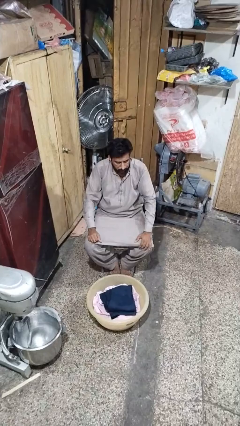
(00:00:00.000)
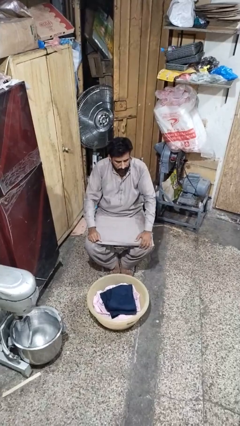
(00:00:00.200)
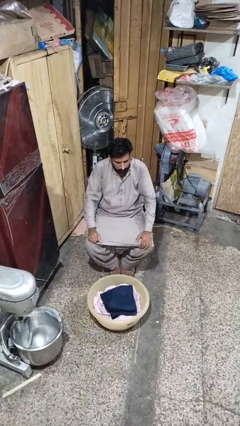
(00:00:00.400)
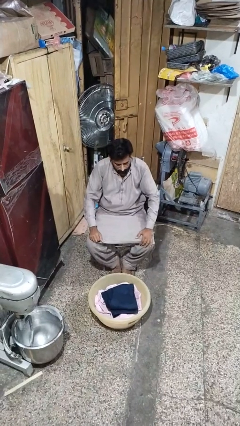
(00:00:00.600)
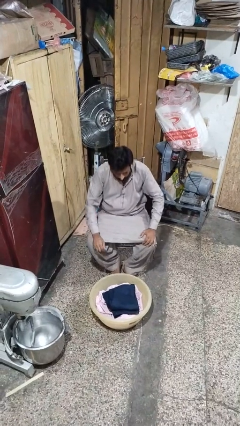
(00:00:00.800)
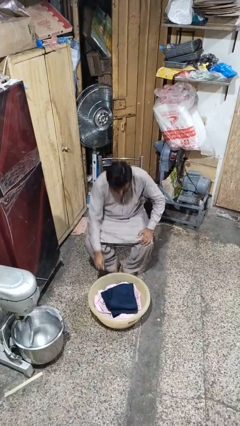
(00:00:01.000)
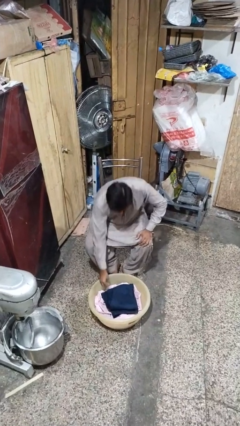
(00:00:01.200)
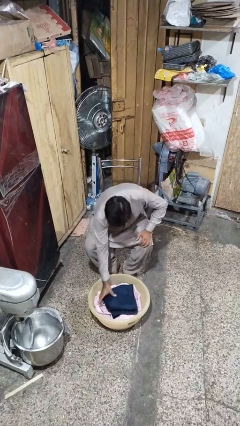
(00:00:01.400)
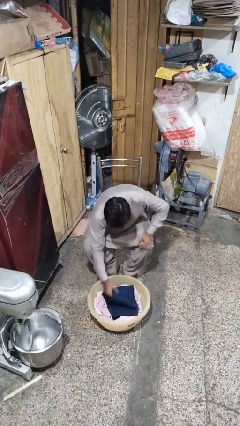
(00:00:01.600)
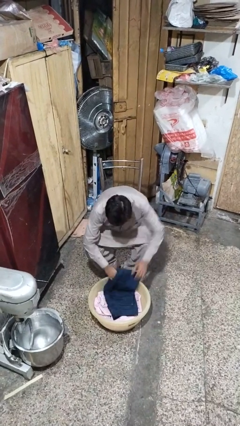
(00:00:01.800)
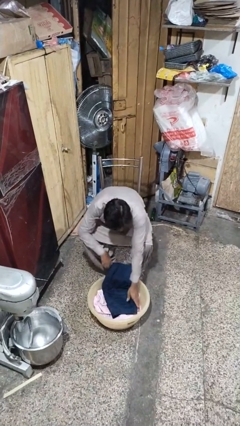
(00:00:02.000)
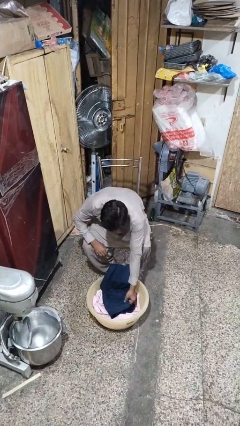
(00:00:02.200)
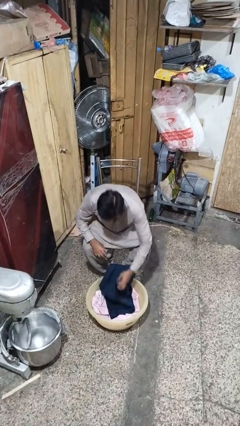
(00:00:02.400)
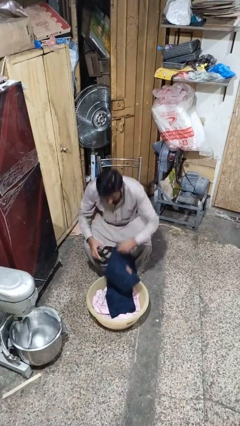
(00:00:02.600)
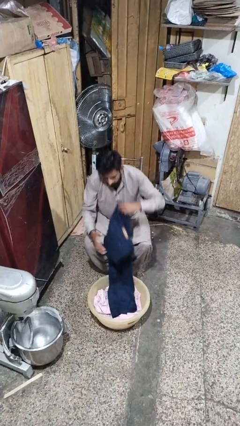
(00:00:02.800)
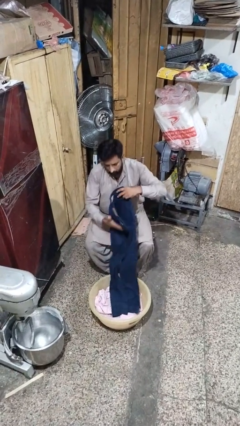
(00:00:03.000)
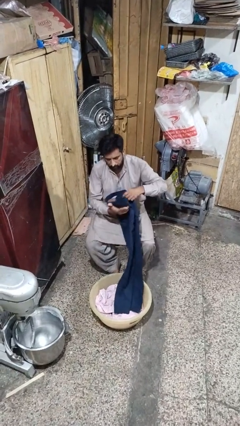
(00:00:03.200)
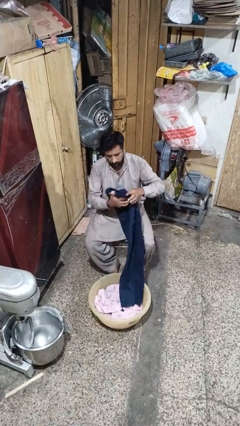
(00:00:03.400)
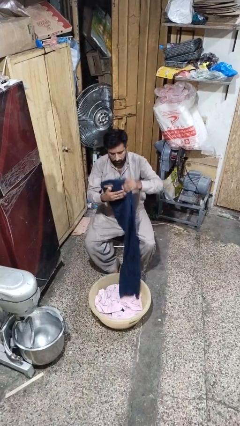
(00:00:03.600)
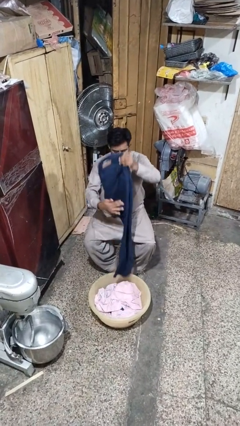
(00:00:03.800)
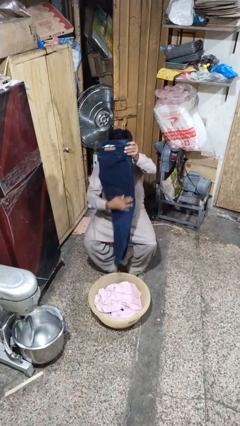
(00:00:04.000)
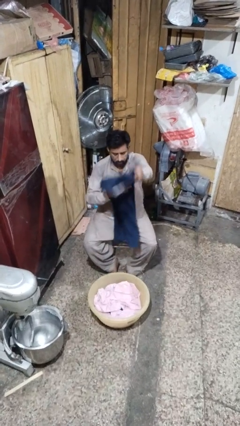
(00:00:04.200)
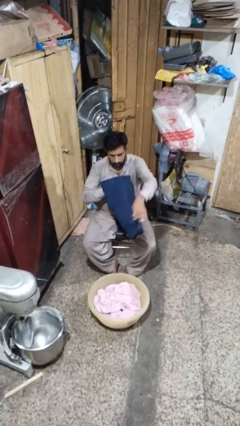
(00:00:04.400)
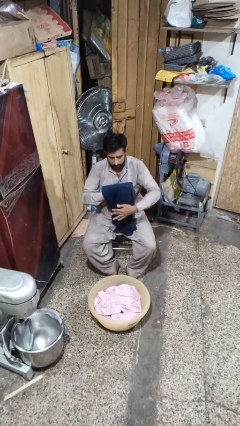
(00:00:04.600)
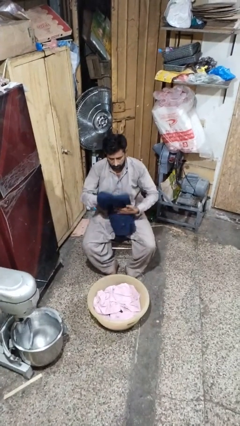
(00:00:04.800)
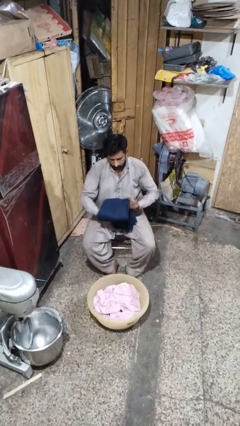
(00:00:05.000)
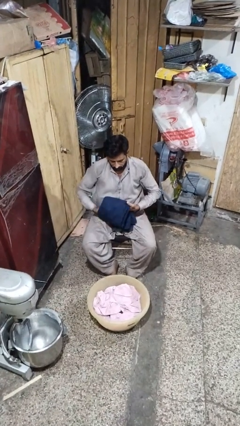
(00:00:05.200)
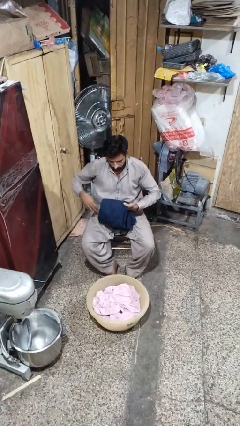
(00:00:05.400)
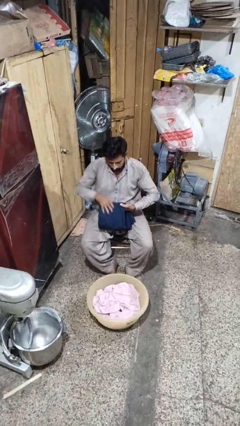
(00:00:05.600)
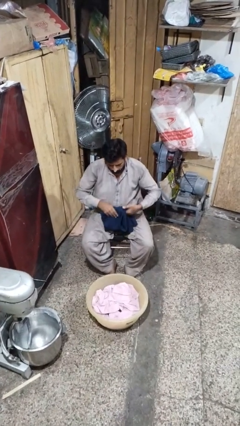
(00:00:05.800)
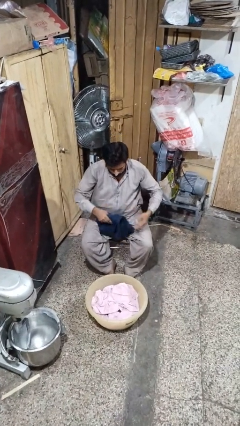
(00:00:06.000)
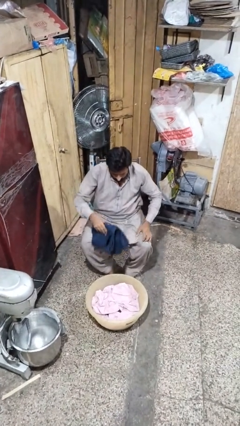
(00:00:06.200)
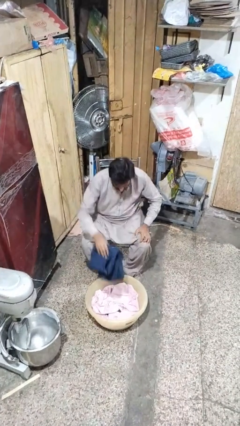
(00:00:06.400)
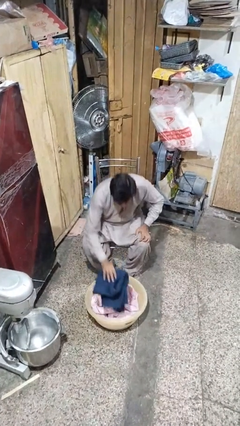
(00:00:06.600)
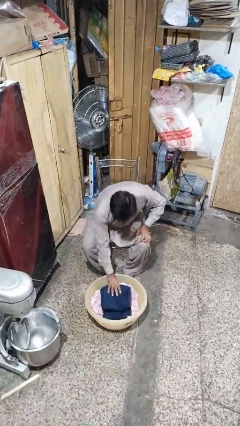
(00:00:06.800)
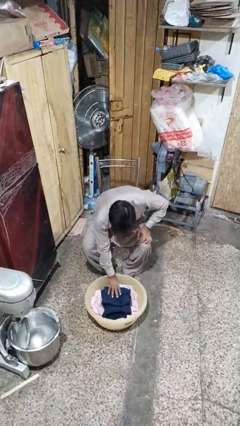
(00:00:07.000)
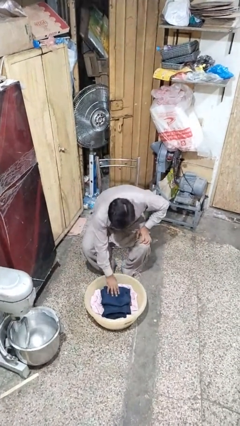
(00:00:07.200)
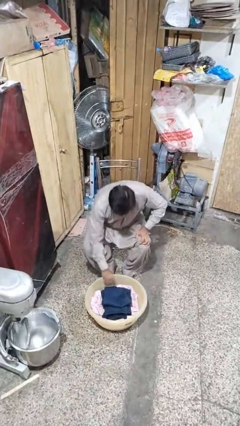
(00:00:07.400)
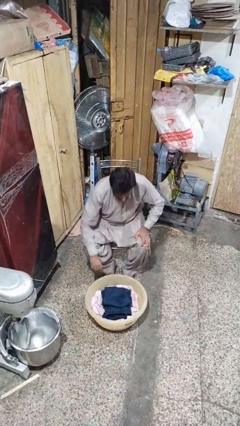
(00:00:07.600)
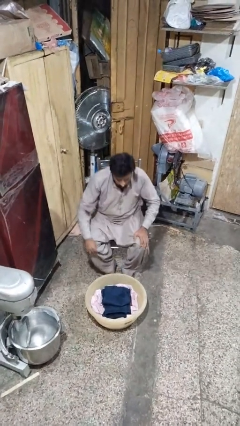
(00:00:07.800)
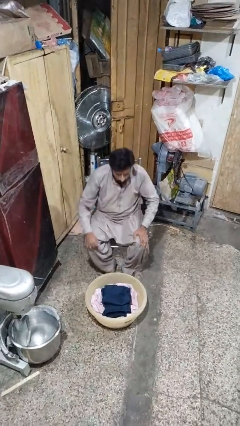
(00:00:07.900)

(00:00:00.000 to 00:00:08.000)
person folds pants

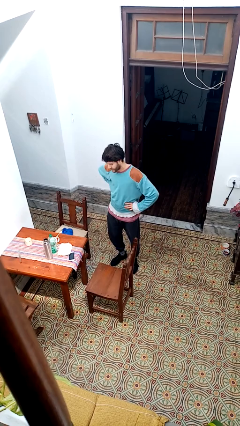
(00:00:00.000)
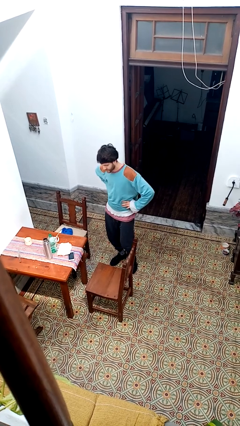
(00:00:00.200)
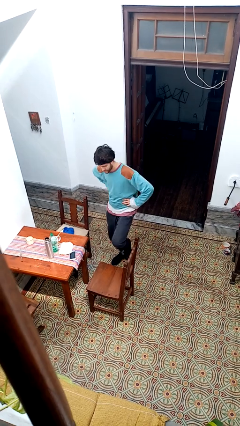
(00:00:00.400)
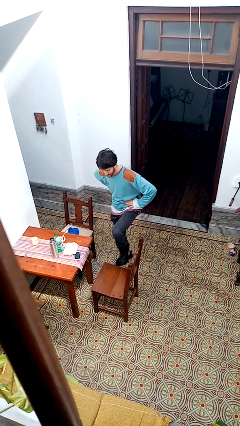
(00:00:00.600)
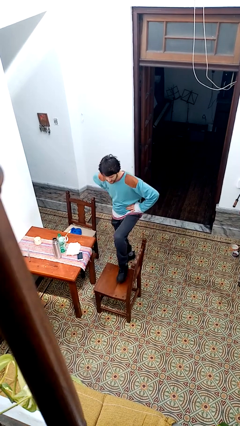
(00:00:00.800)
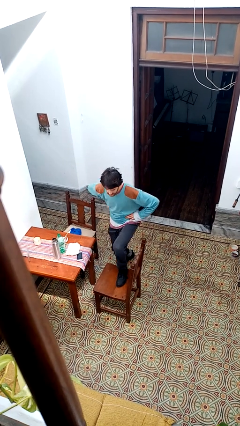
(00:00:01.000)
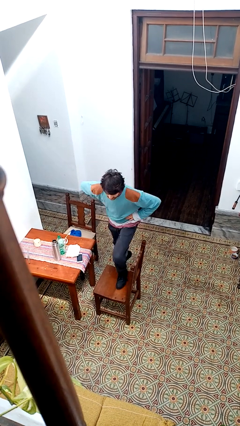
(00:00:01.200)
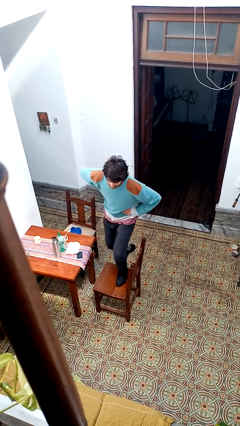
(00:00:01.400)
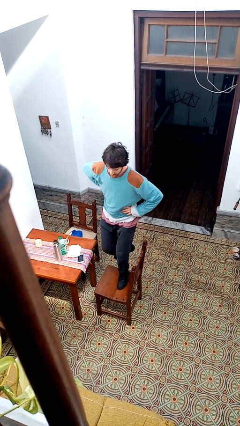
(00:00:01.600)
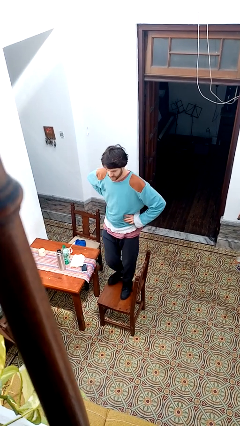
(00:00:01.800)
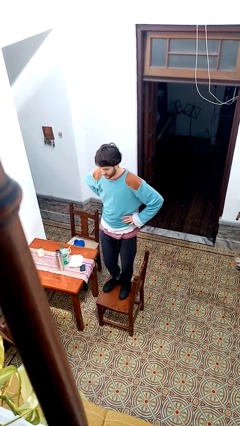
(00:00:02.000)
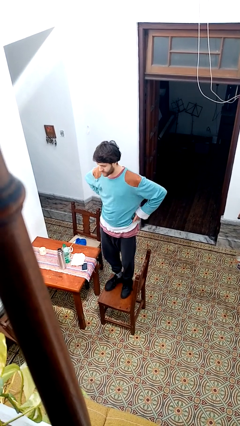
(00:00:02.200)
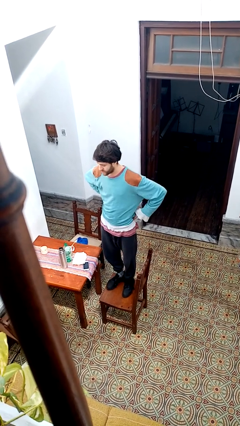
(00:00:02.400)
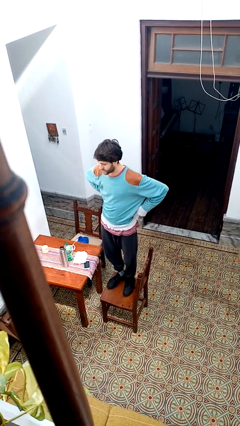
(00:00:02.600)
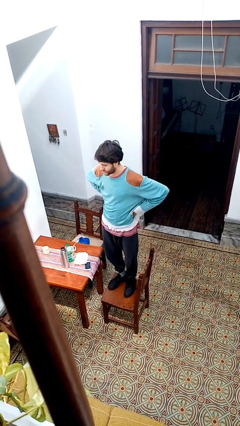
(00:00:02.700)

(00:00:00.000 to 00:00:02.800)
person climbs on chair

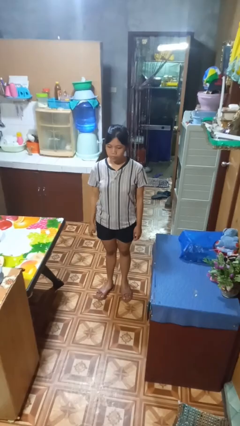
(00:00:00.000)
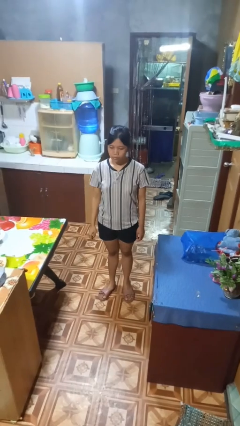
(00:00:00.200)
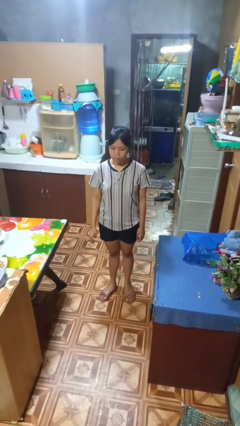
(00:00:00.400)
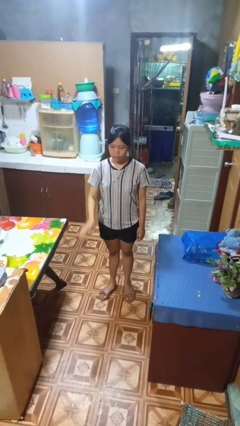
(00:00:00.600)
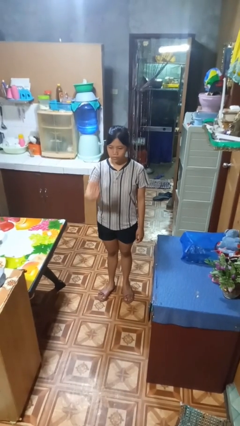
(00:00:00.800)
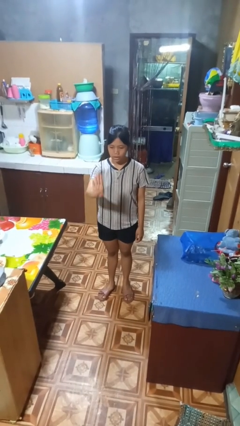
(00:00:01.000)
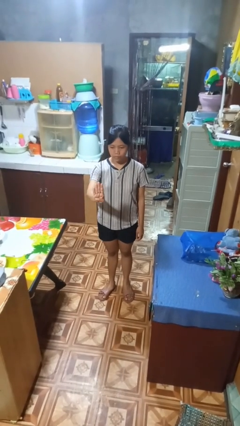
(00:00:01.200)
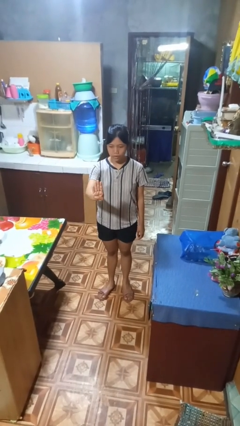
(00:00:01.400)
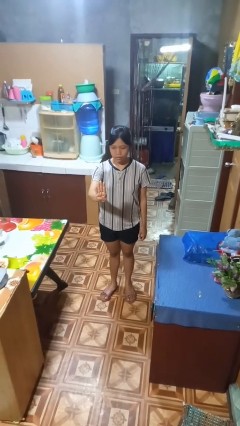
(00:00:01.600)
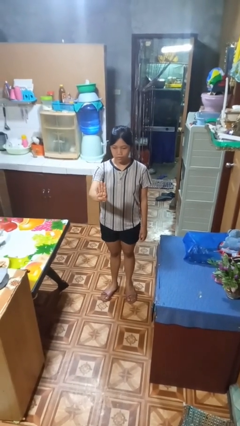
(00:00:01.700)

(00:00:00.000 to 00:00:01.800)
person gestures number four

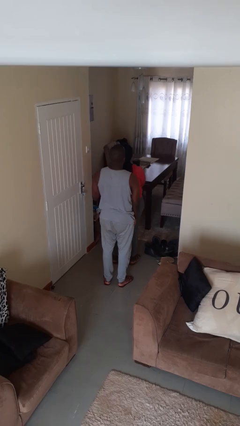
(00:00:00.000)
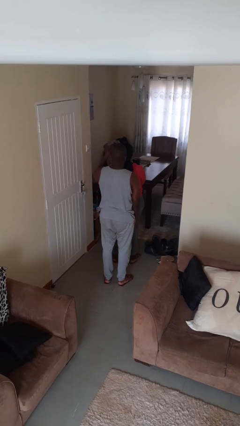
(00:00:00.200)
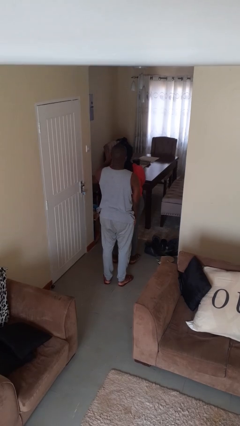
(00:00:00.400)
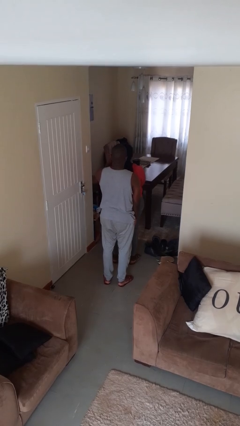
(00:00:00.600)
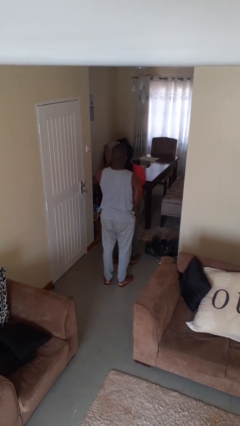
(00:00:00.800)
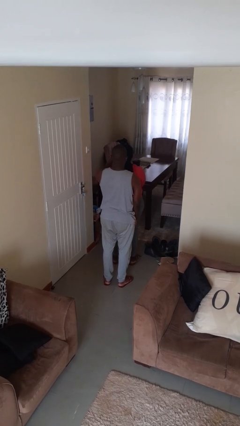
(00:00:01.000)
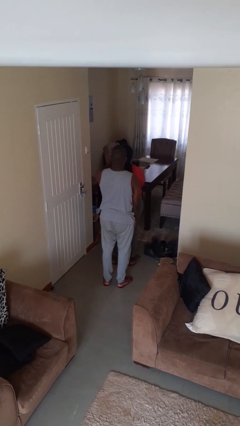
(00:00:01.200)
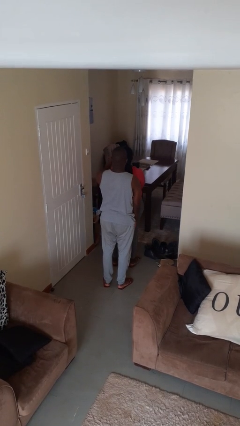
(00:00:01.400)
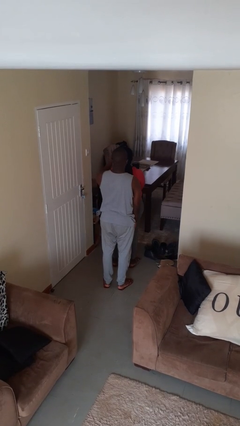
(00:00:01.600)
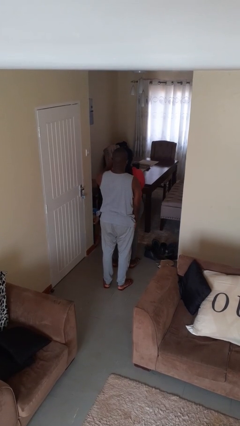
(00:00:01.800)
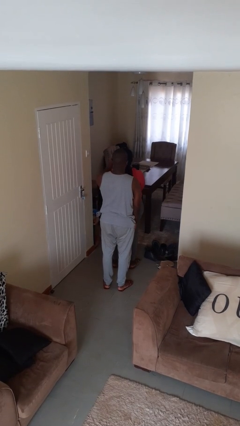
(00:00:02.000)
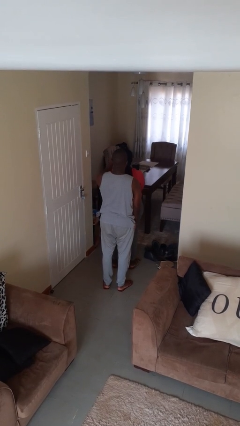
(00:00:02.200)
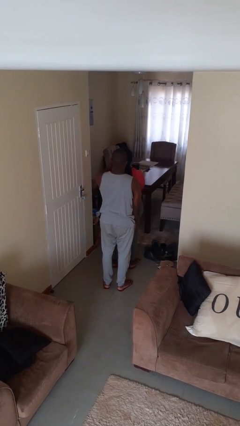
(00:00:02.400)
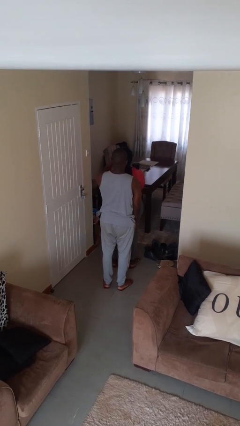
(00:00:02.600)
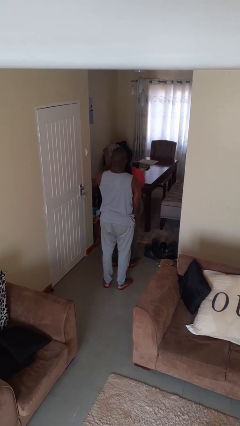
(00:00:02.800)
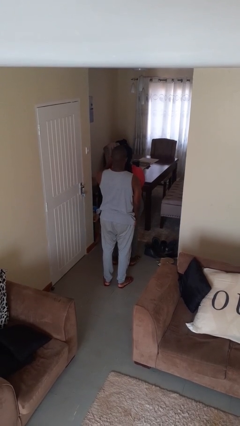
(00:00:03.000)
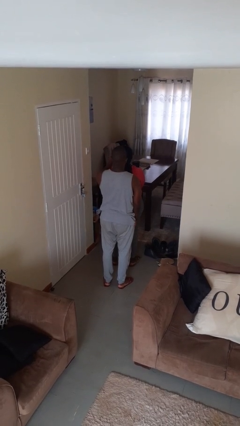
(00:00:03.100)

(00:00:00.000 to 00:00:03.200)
person brushes hair of person

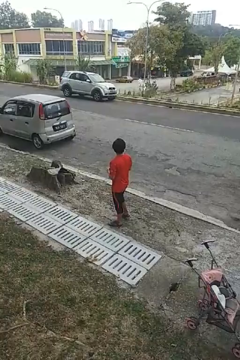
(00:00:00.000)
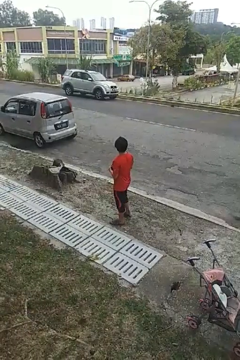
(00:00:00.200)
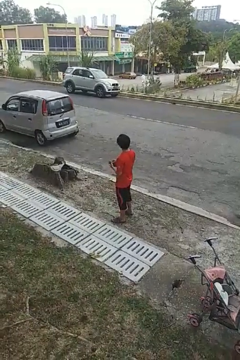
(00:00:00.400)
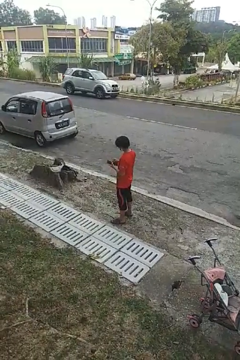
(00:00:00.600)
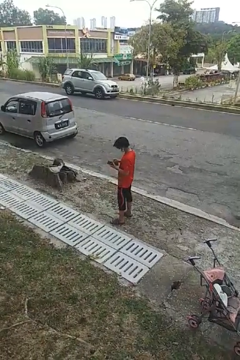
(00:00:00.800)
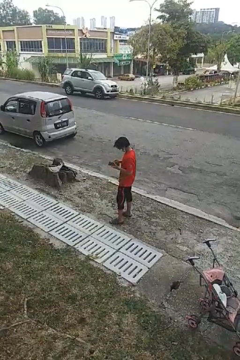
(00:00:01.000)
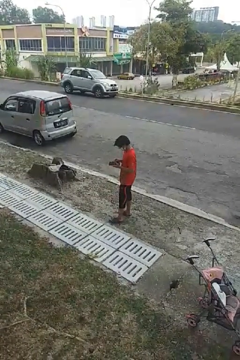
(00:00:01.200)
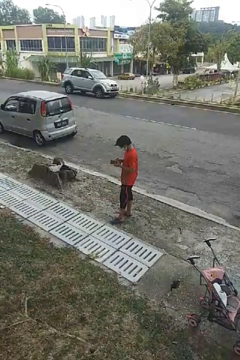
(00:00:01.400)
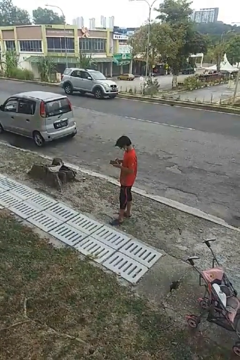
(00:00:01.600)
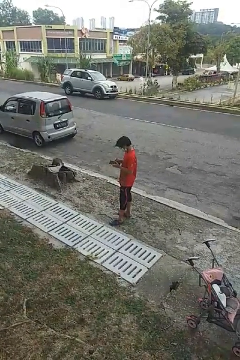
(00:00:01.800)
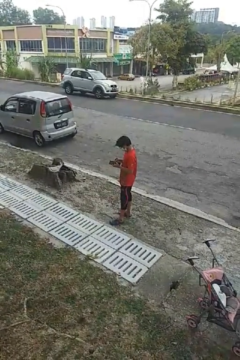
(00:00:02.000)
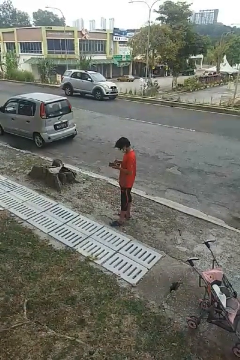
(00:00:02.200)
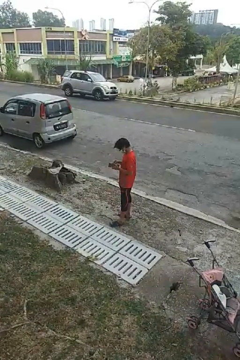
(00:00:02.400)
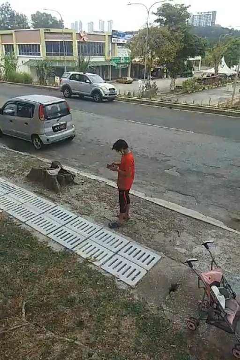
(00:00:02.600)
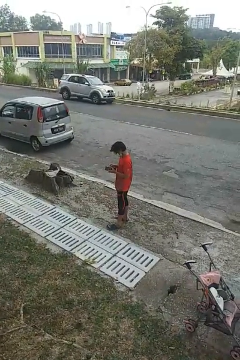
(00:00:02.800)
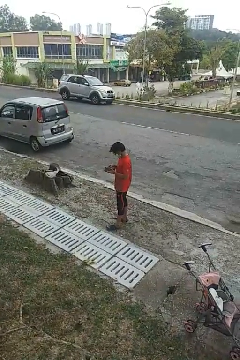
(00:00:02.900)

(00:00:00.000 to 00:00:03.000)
person searches in purse
